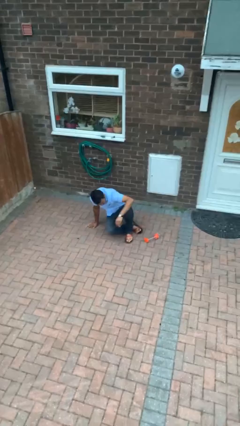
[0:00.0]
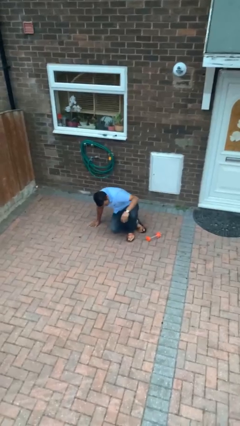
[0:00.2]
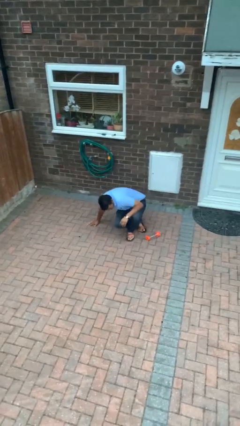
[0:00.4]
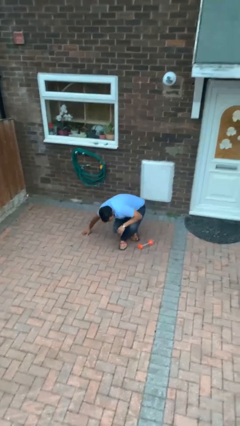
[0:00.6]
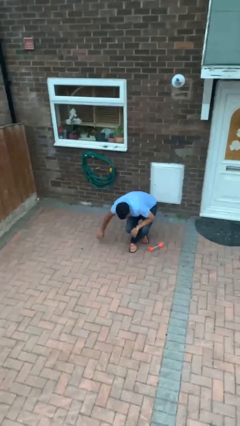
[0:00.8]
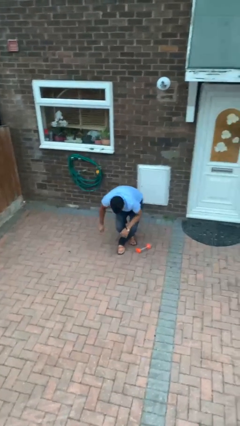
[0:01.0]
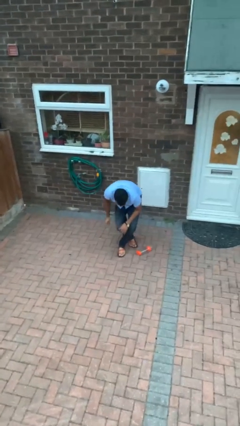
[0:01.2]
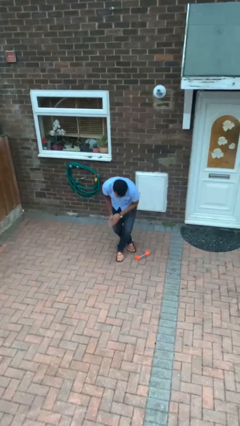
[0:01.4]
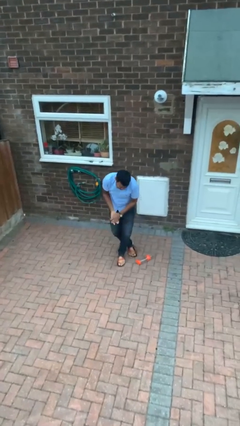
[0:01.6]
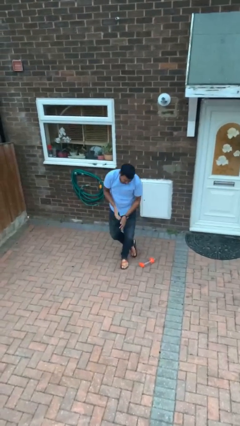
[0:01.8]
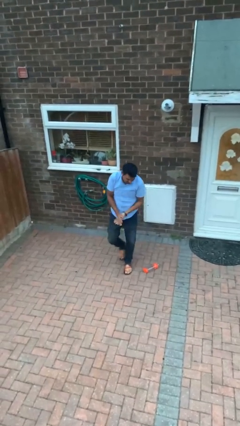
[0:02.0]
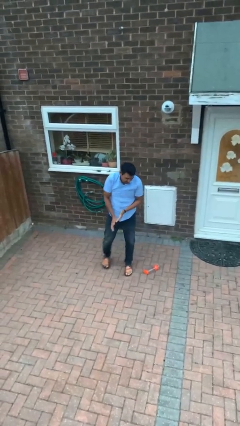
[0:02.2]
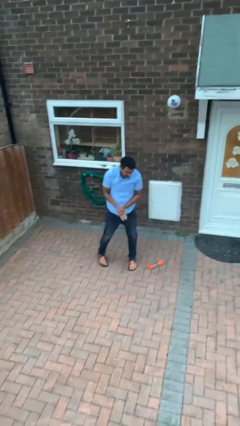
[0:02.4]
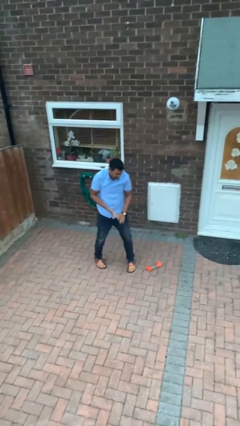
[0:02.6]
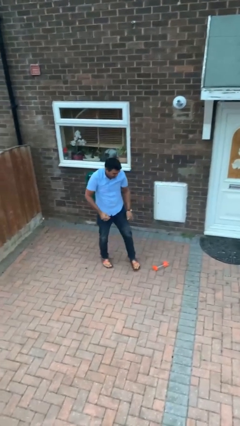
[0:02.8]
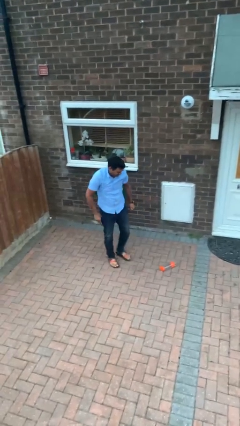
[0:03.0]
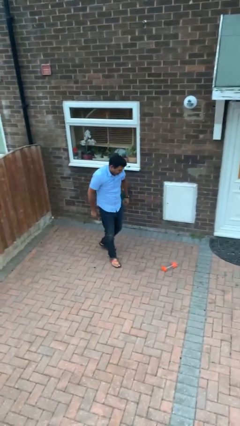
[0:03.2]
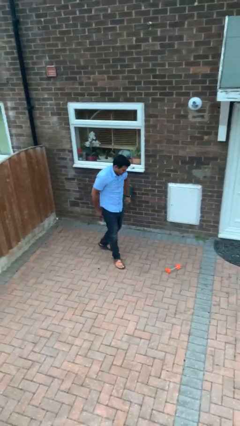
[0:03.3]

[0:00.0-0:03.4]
person stands up from floor

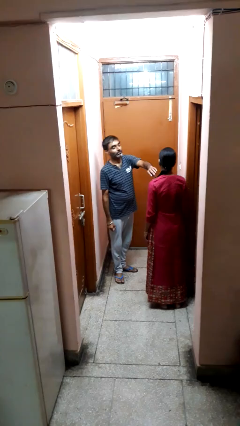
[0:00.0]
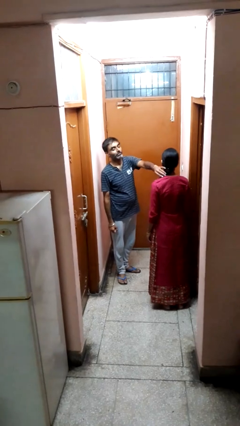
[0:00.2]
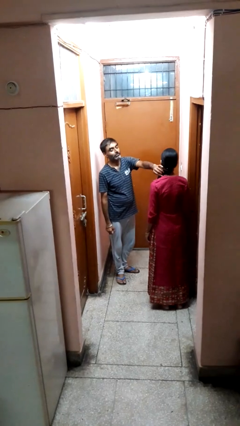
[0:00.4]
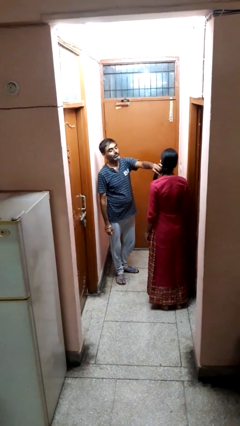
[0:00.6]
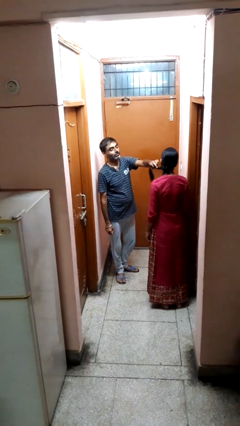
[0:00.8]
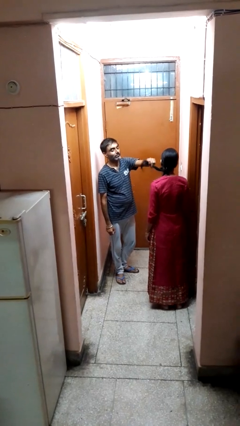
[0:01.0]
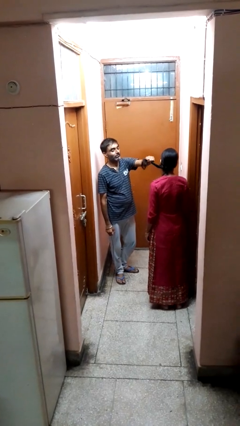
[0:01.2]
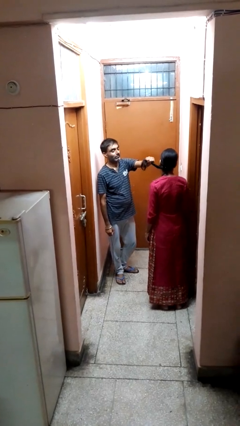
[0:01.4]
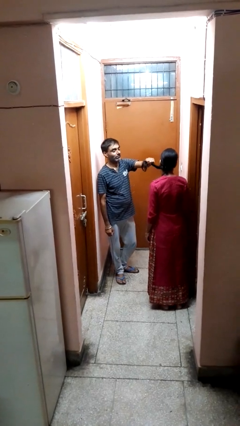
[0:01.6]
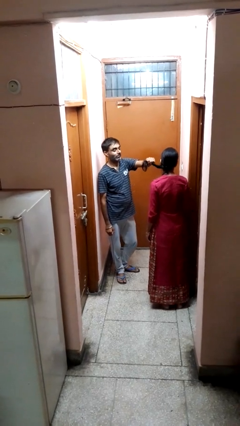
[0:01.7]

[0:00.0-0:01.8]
person grabs person by hair

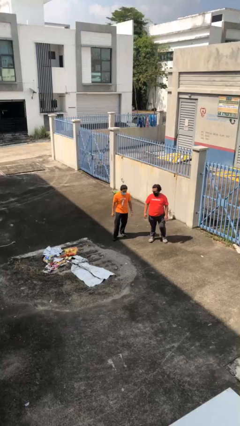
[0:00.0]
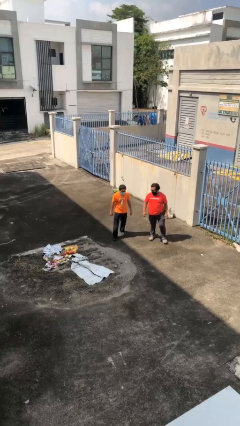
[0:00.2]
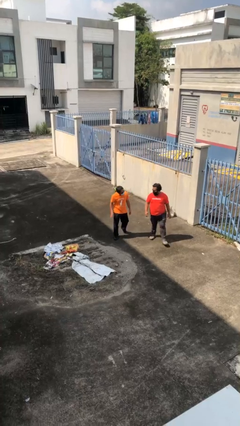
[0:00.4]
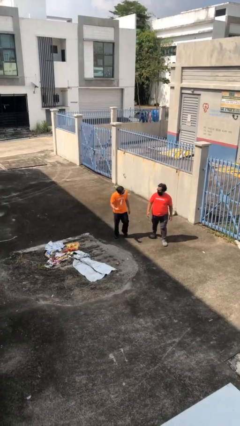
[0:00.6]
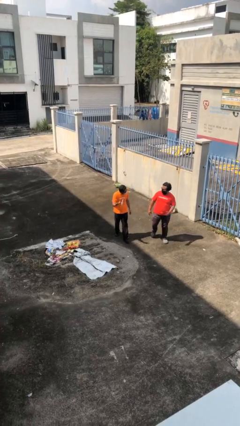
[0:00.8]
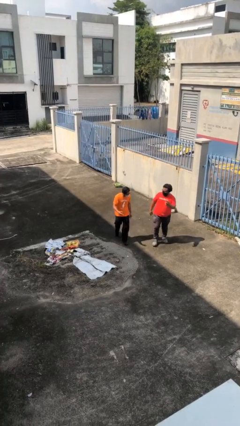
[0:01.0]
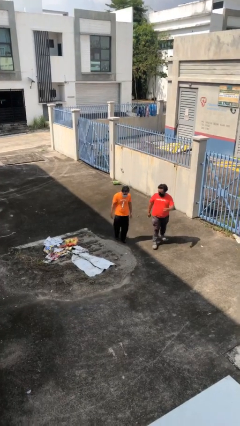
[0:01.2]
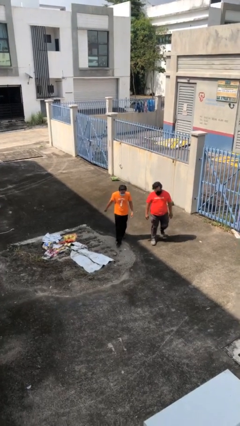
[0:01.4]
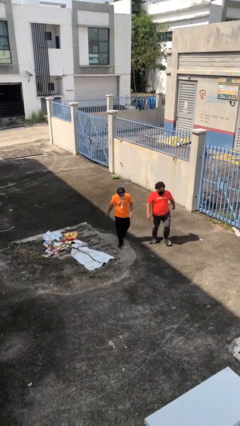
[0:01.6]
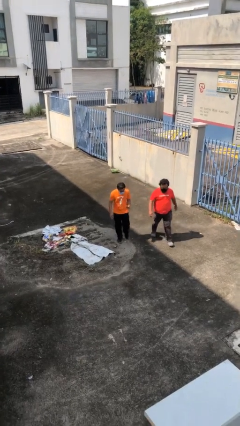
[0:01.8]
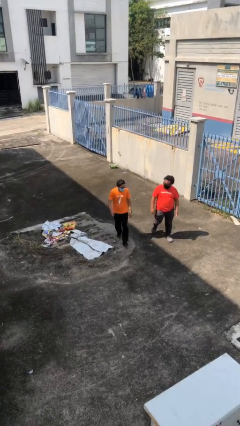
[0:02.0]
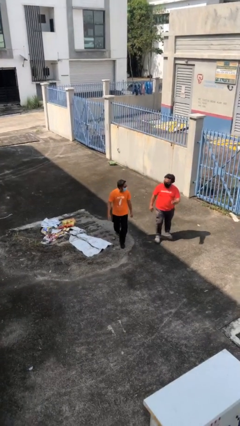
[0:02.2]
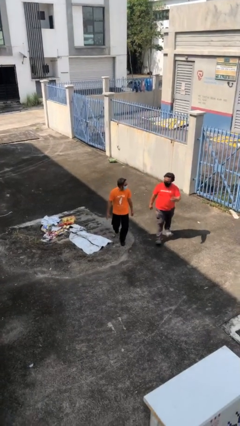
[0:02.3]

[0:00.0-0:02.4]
person talks to person

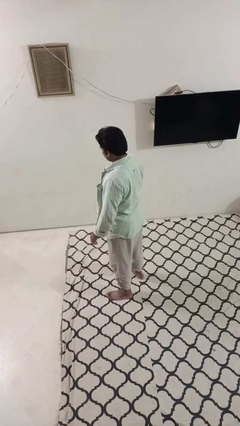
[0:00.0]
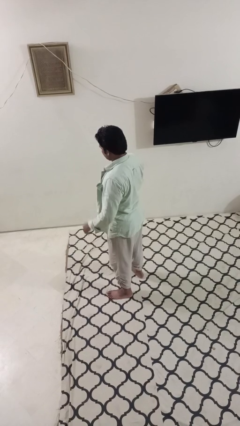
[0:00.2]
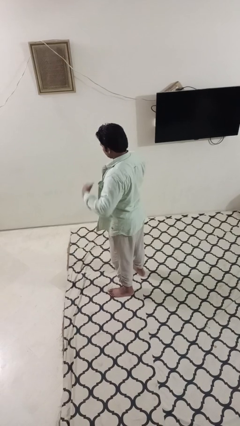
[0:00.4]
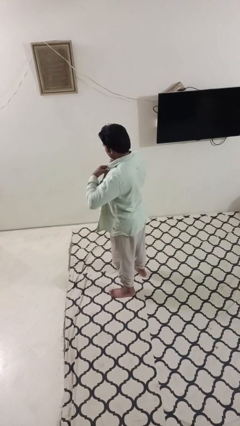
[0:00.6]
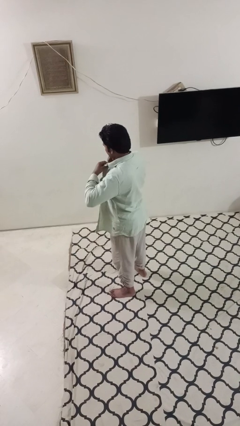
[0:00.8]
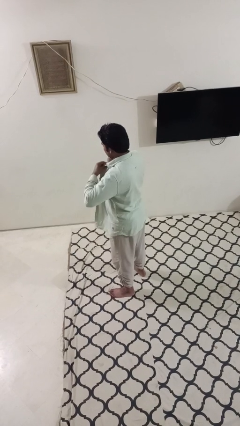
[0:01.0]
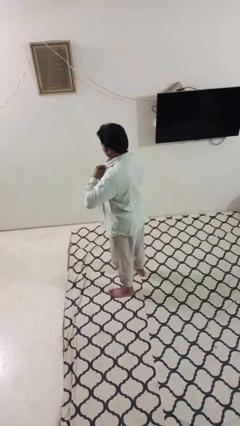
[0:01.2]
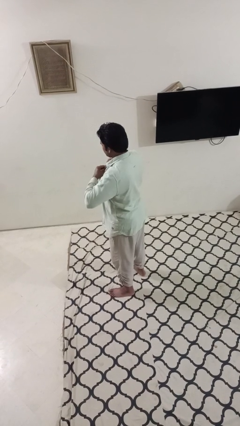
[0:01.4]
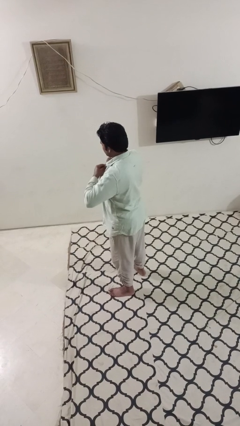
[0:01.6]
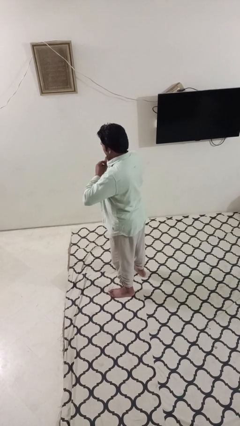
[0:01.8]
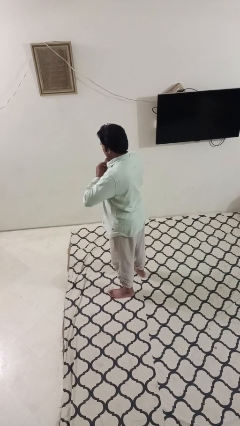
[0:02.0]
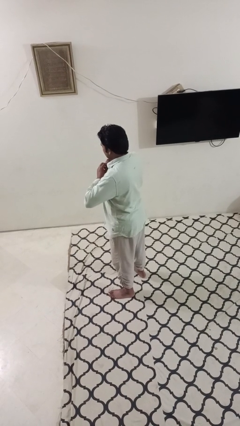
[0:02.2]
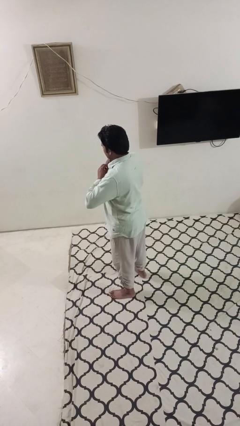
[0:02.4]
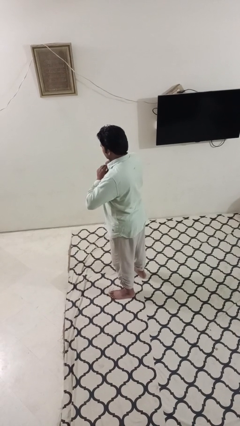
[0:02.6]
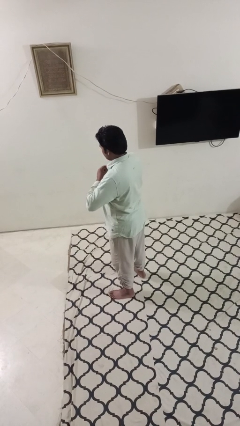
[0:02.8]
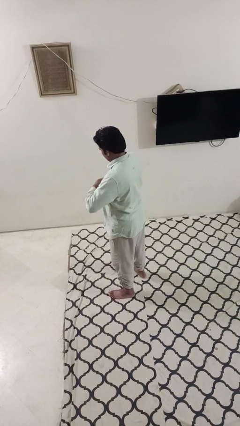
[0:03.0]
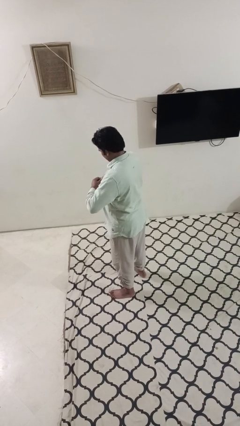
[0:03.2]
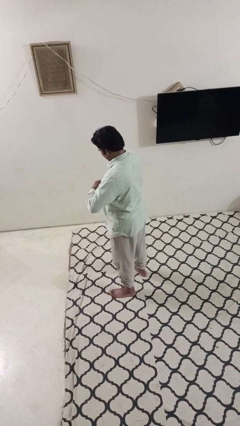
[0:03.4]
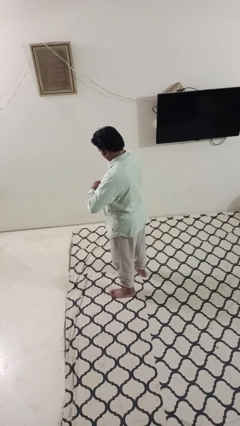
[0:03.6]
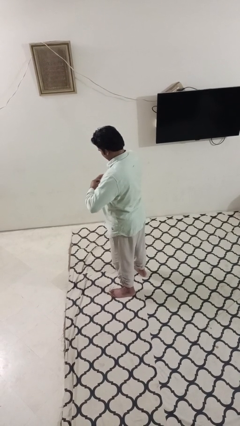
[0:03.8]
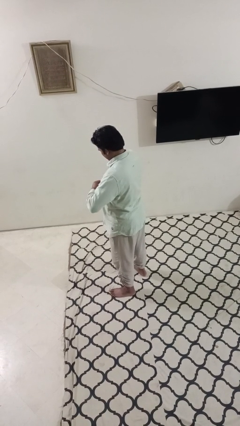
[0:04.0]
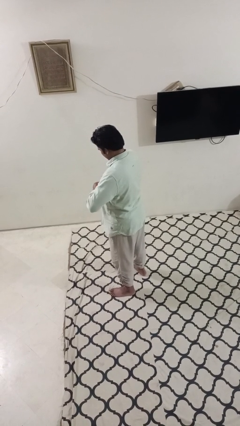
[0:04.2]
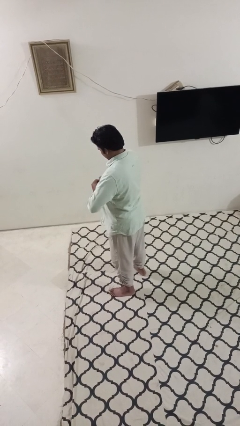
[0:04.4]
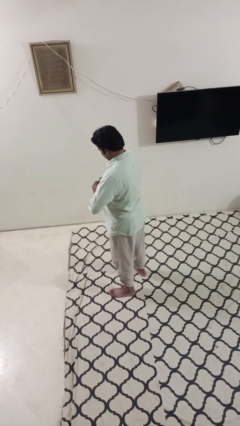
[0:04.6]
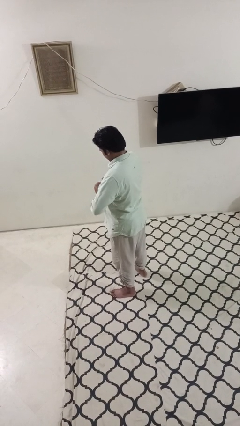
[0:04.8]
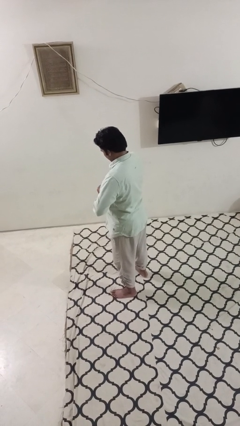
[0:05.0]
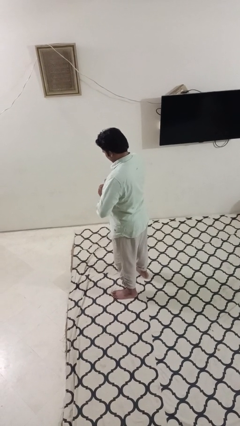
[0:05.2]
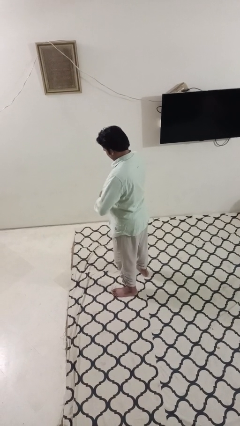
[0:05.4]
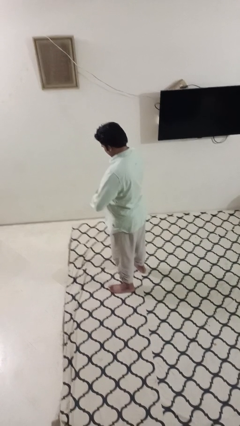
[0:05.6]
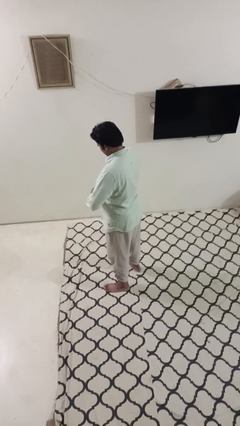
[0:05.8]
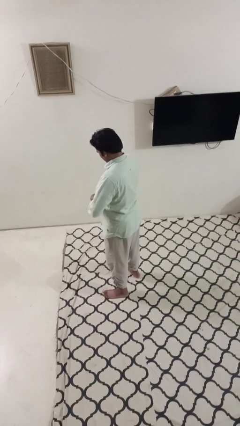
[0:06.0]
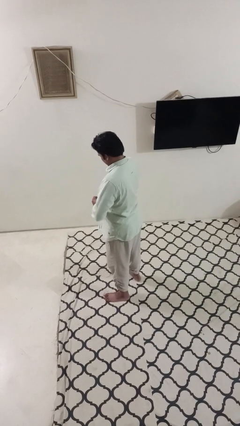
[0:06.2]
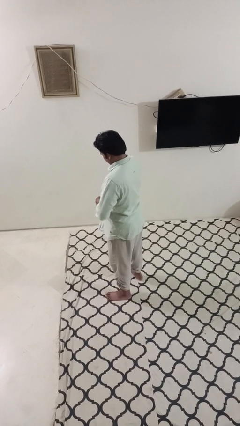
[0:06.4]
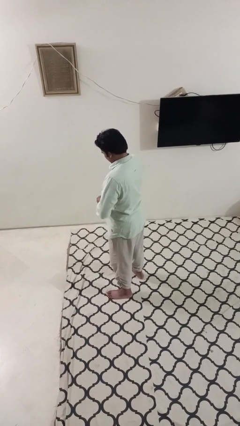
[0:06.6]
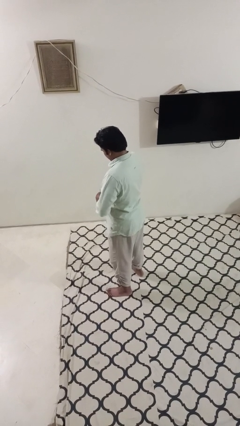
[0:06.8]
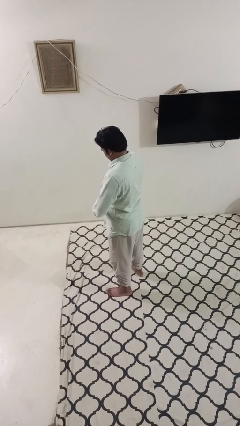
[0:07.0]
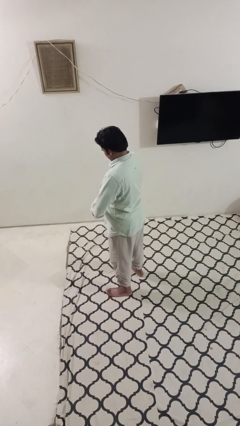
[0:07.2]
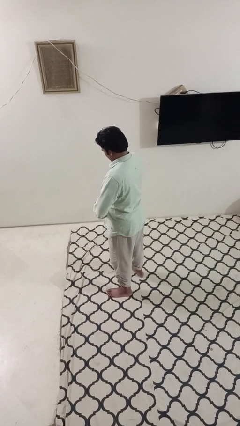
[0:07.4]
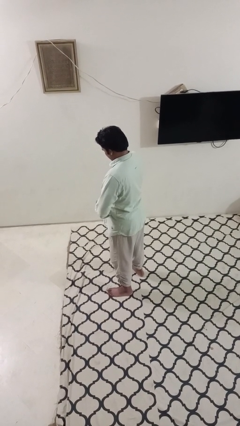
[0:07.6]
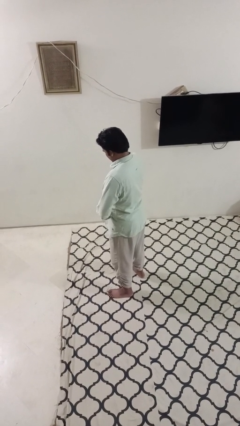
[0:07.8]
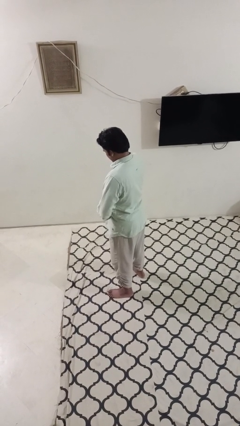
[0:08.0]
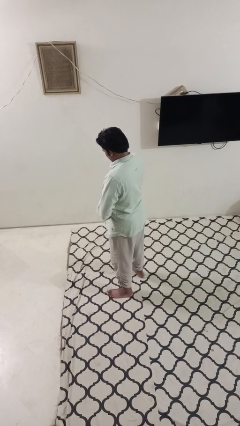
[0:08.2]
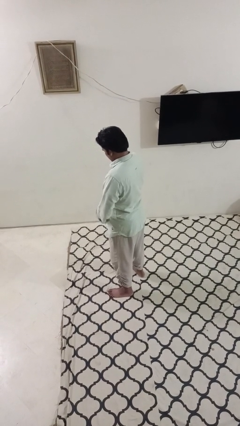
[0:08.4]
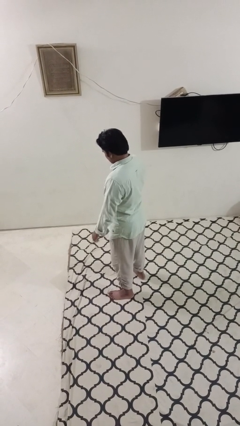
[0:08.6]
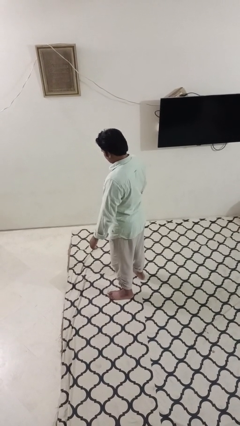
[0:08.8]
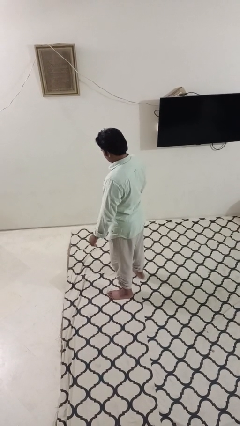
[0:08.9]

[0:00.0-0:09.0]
person buttons shirt

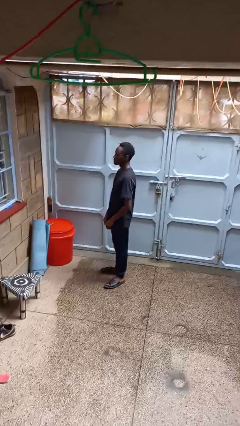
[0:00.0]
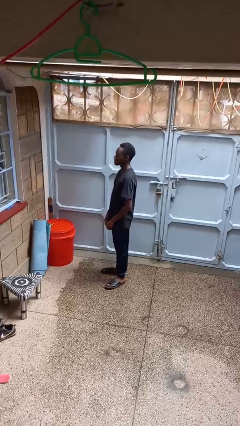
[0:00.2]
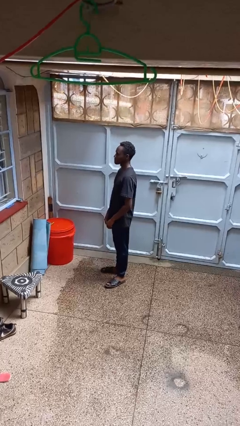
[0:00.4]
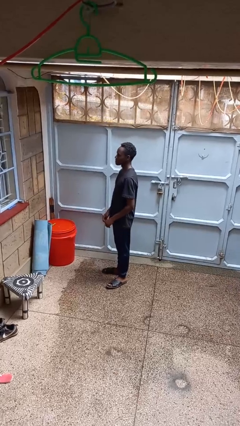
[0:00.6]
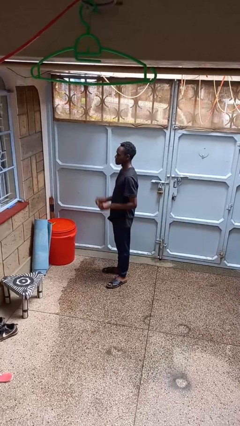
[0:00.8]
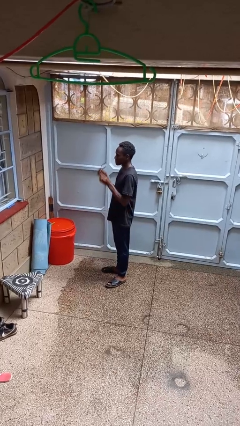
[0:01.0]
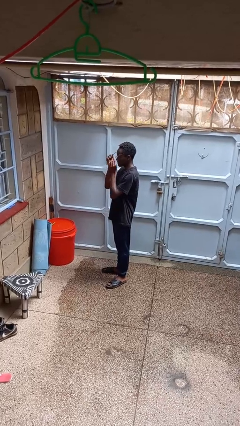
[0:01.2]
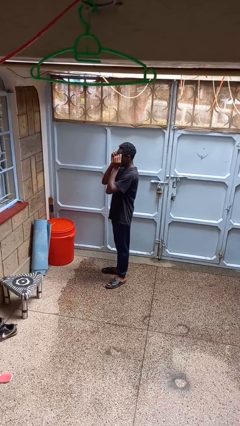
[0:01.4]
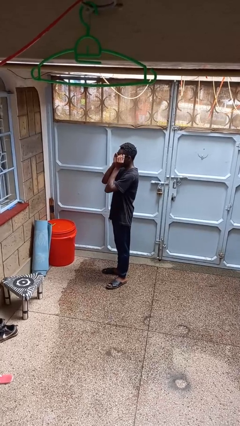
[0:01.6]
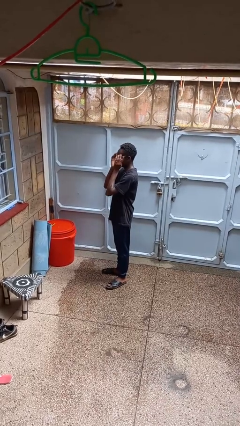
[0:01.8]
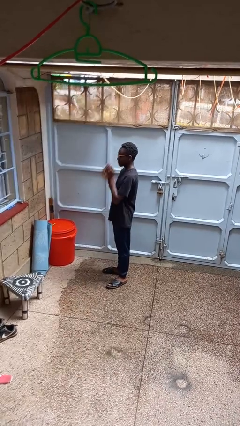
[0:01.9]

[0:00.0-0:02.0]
person puts on glasses
